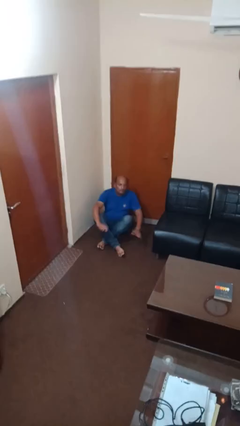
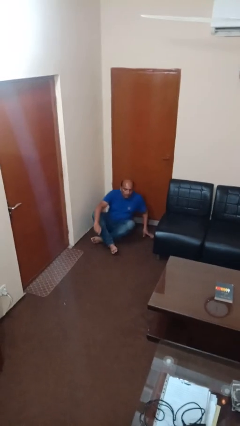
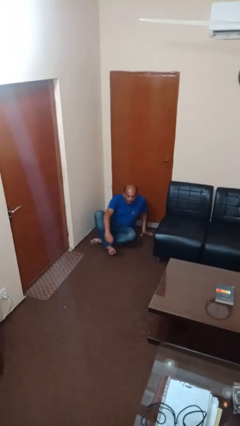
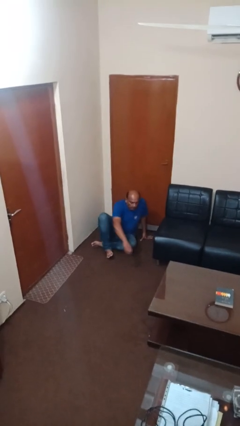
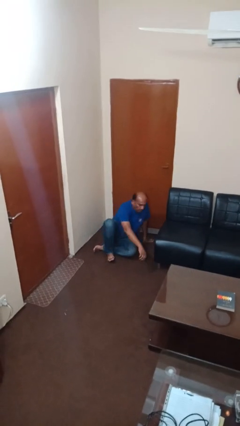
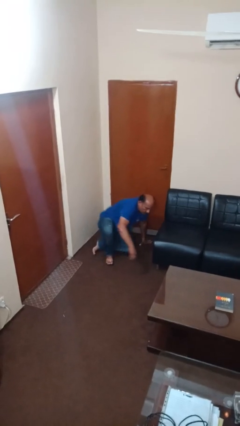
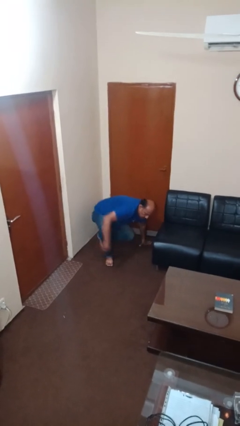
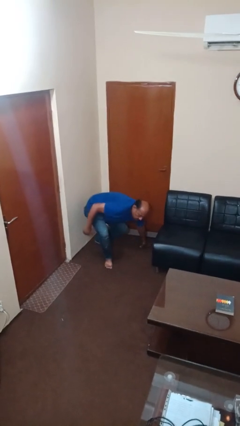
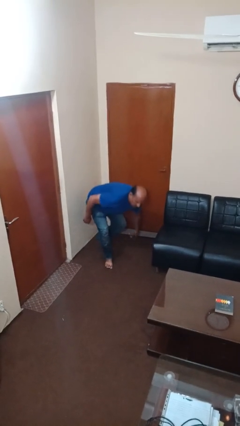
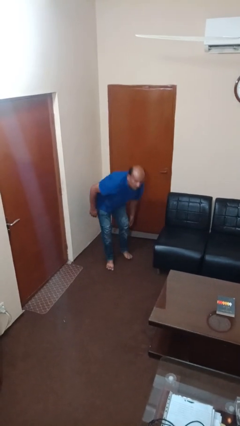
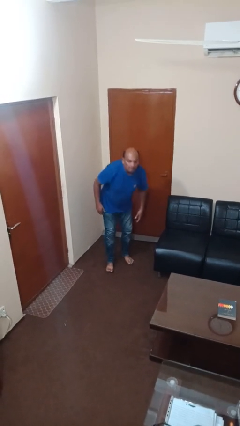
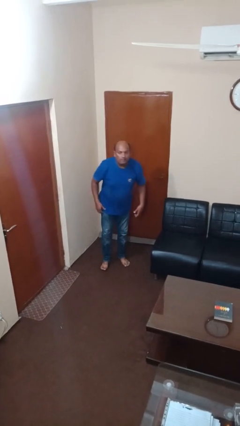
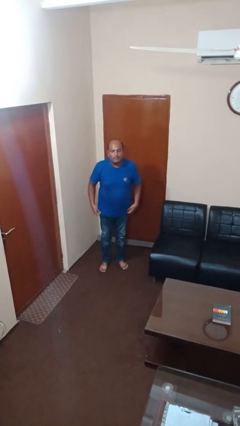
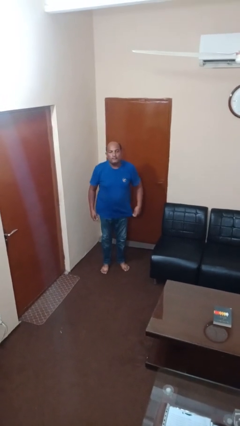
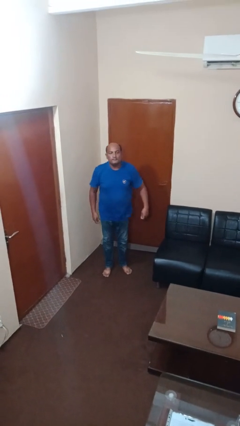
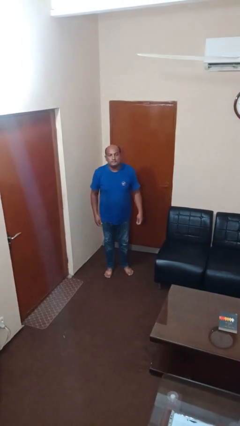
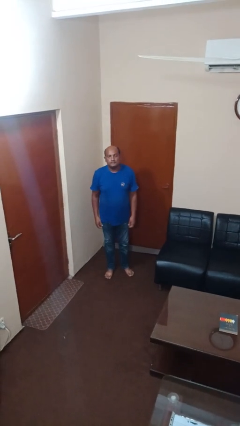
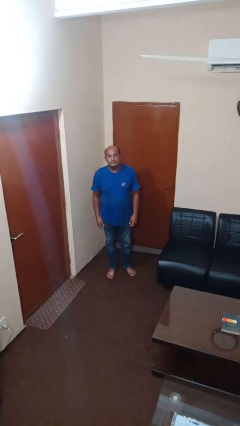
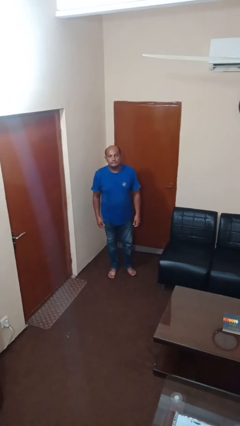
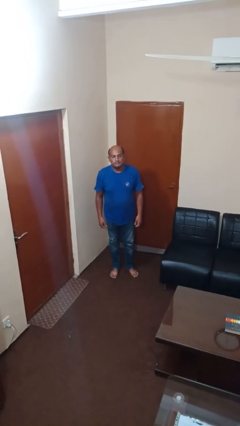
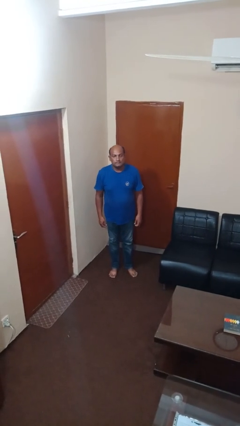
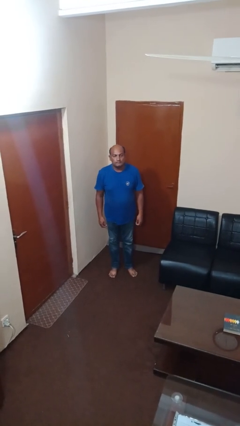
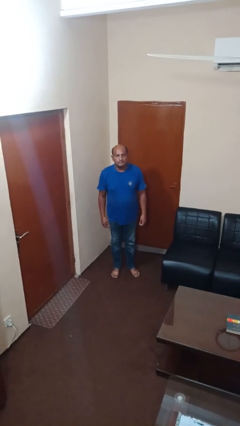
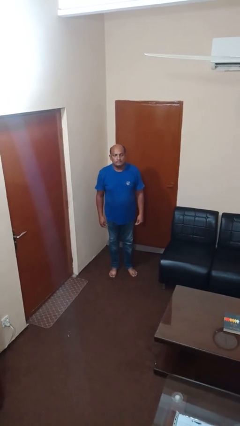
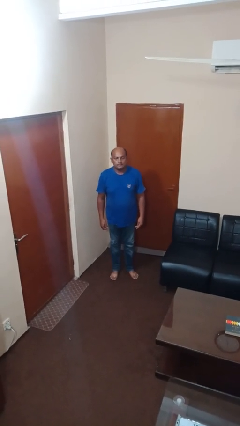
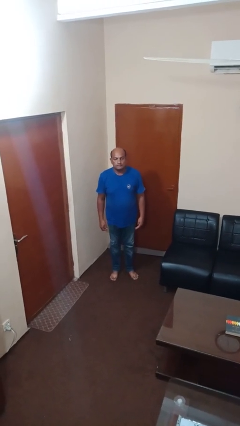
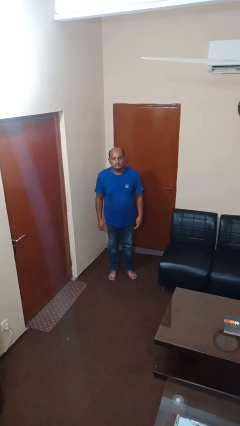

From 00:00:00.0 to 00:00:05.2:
person stands up from floor

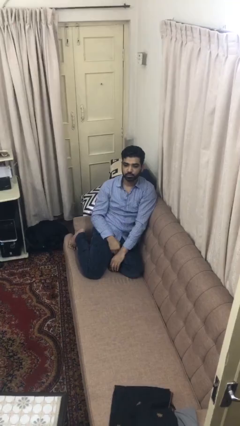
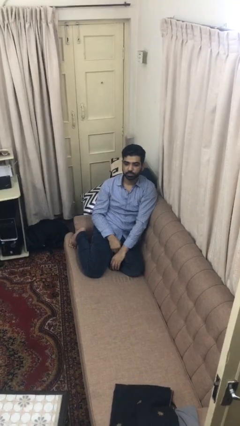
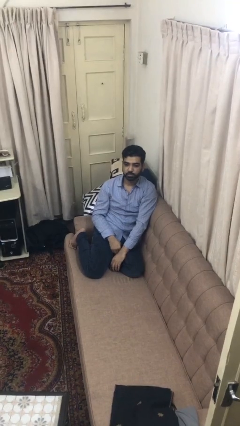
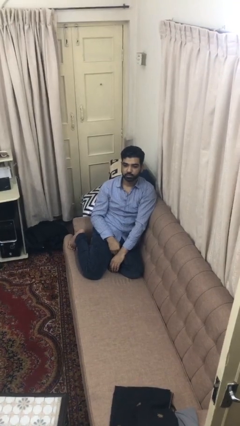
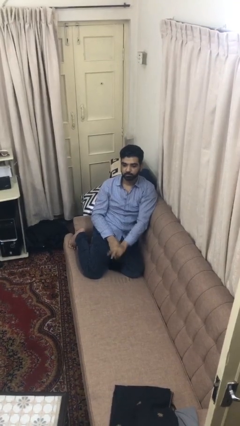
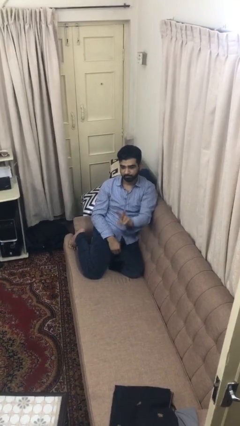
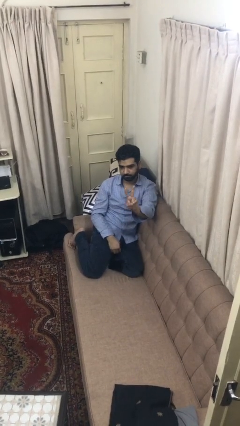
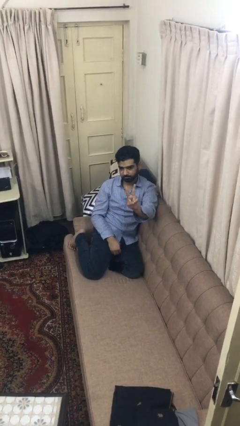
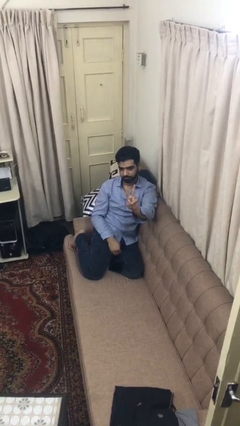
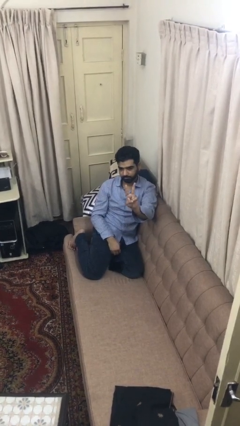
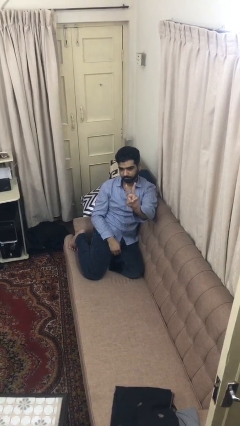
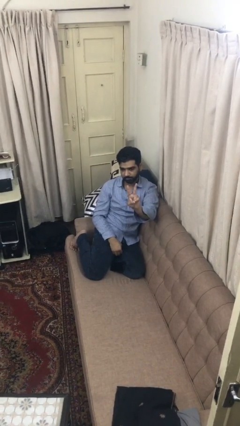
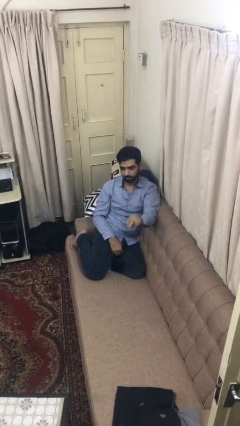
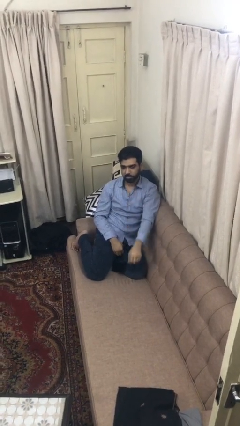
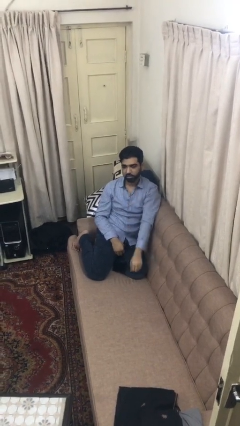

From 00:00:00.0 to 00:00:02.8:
person gestures peace

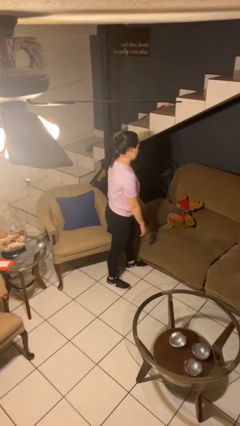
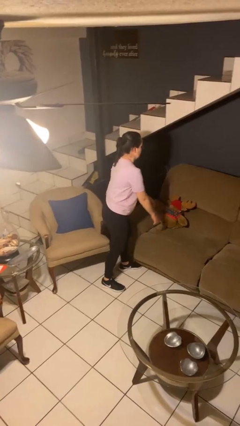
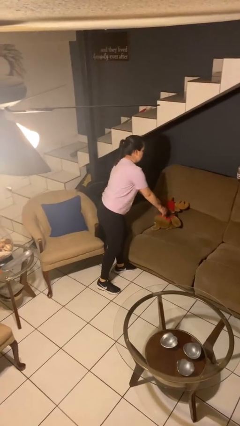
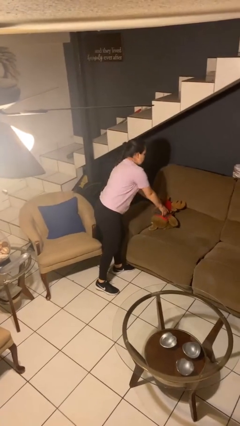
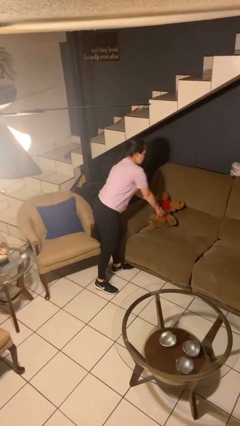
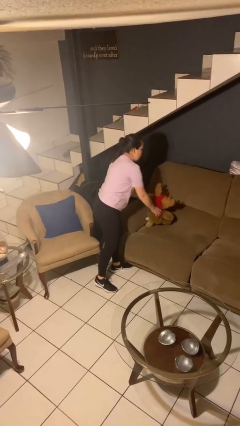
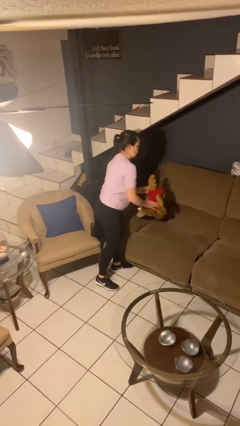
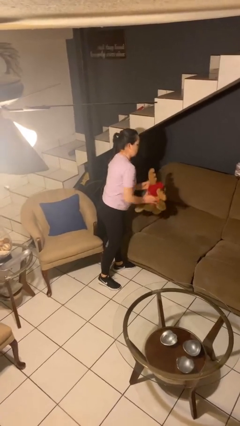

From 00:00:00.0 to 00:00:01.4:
person picks up object from couch

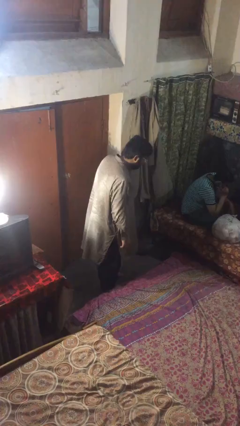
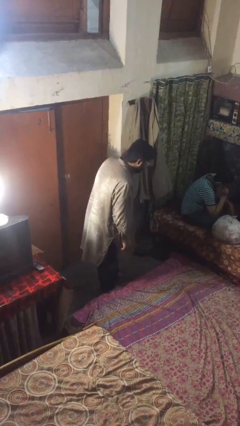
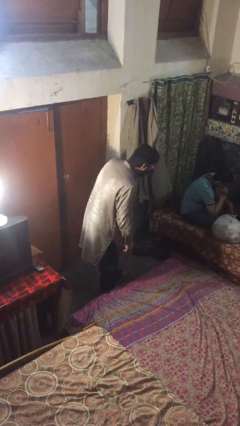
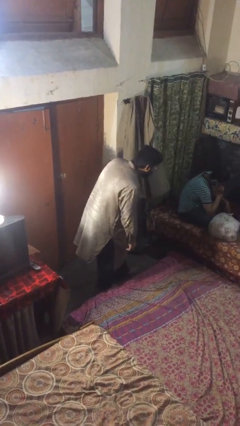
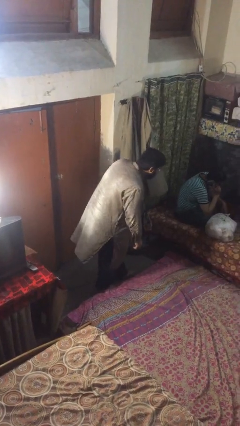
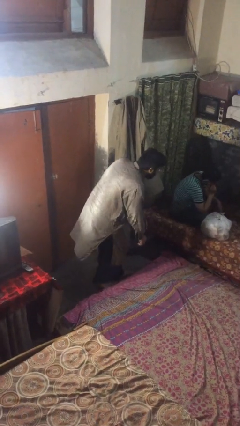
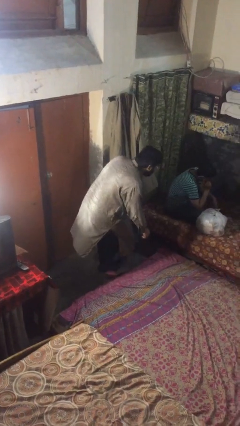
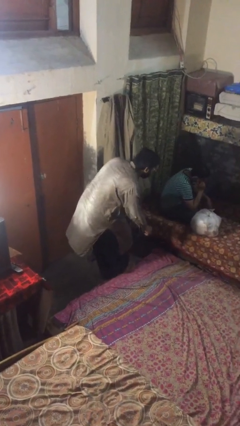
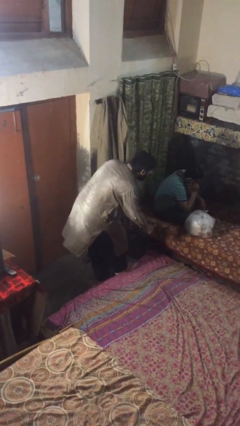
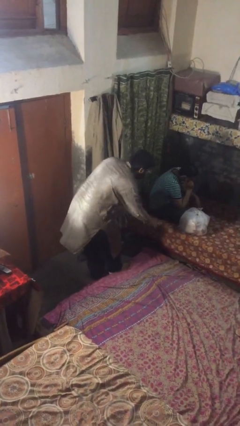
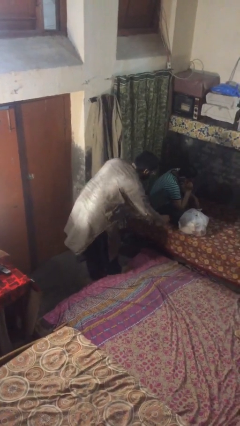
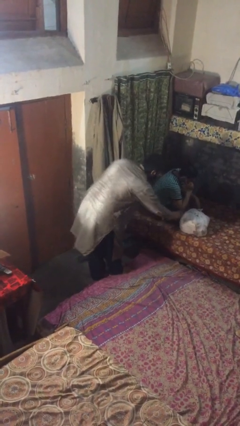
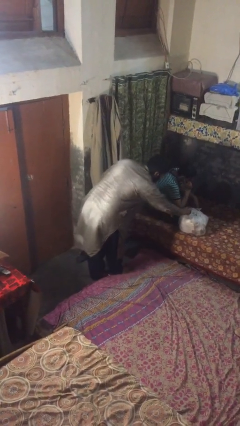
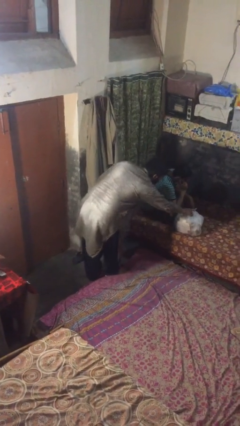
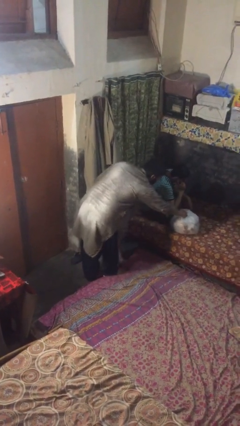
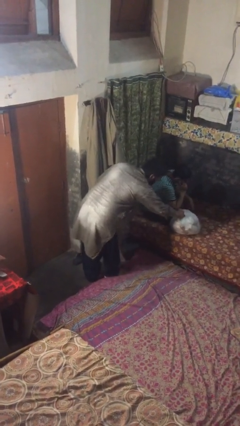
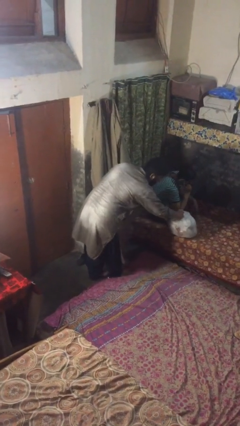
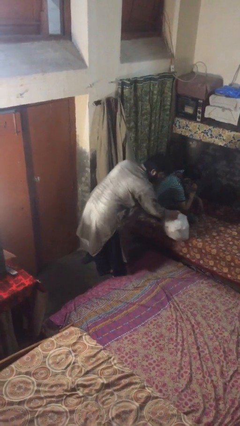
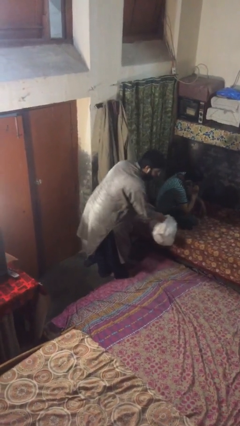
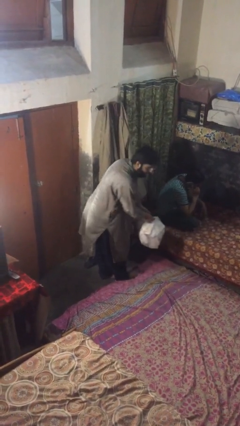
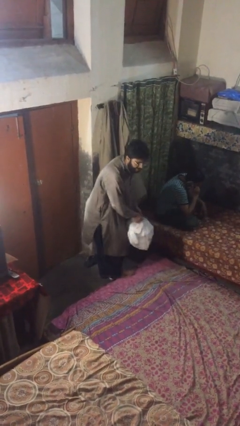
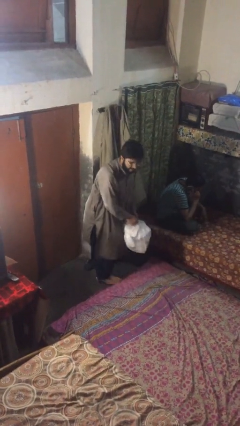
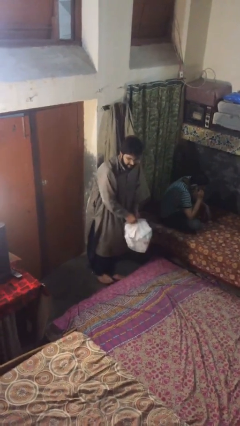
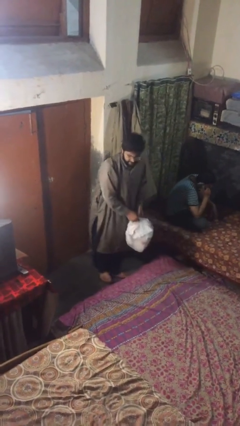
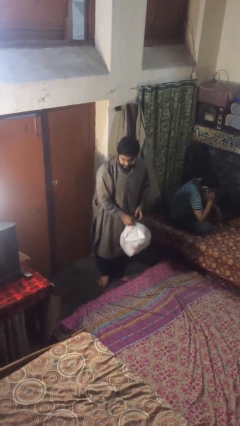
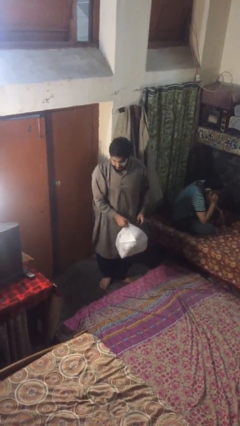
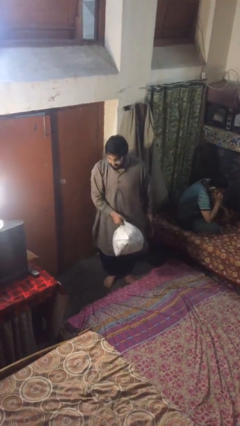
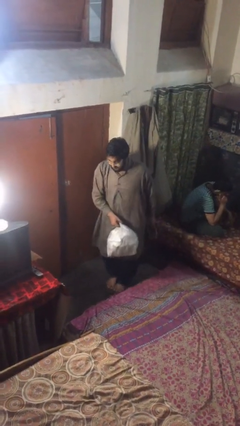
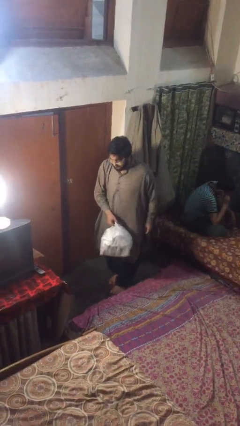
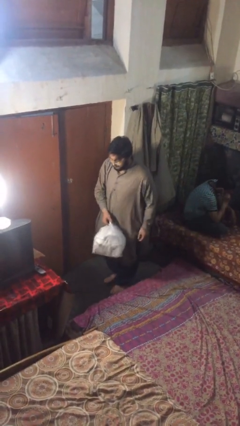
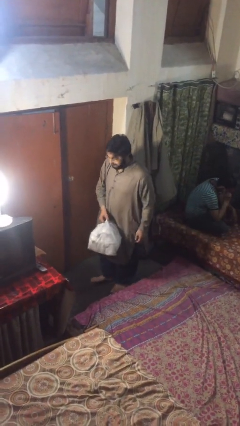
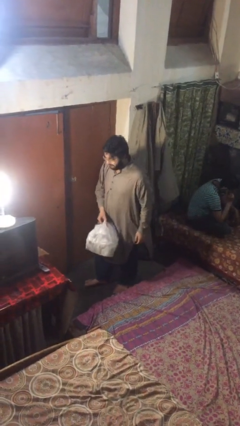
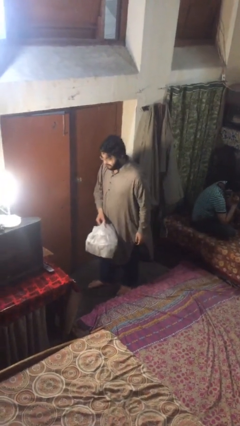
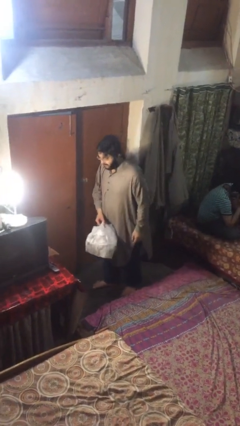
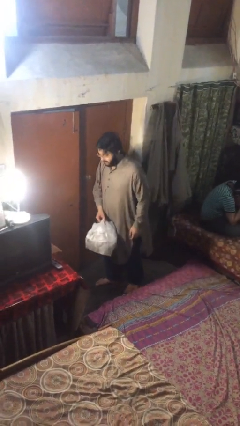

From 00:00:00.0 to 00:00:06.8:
person steals object from person

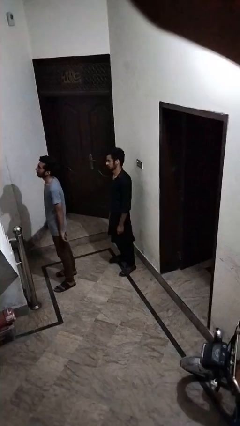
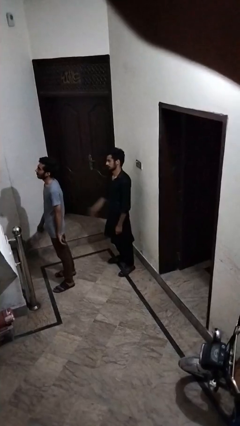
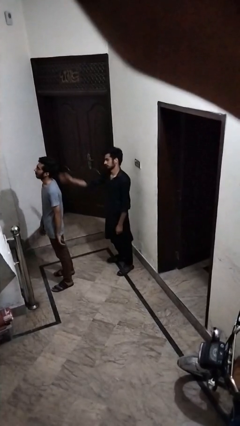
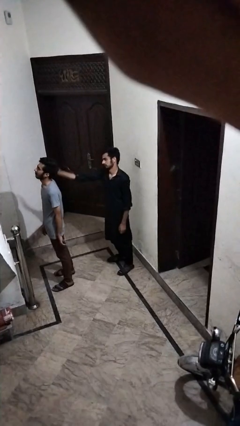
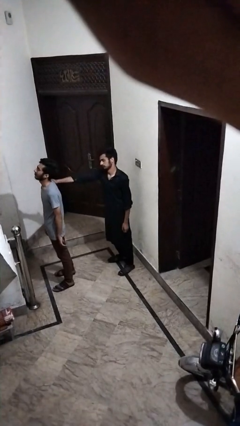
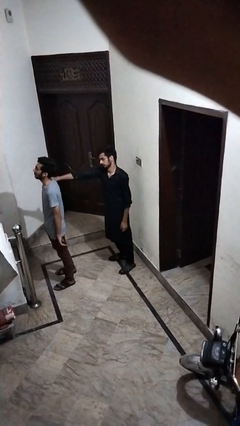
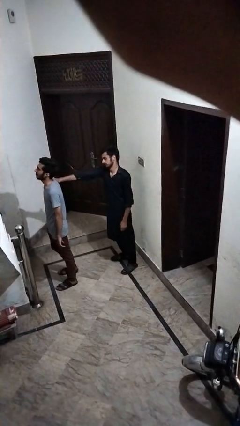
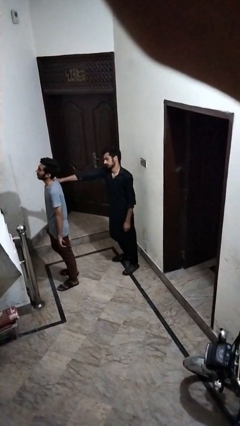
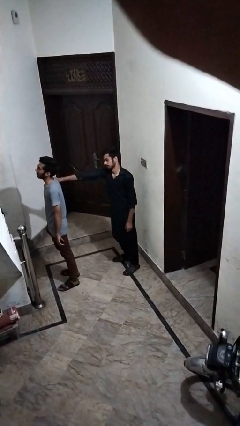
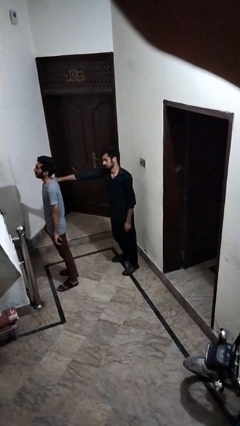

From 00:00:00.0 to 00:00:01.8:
person grabs person by shoulder
